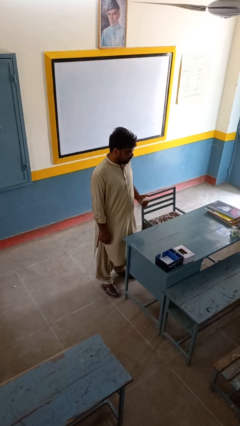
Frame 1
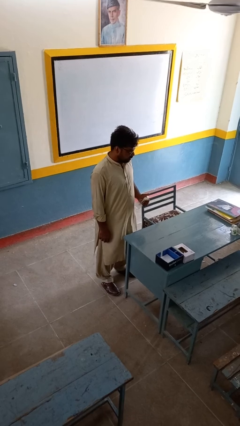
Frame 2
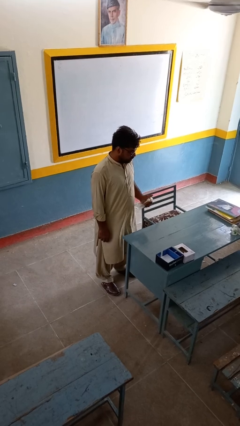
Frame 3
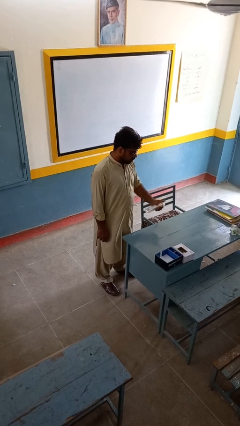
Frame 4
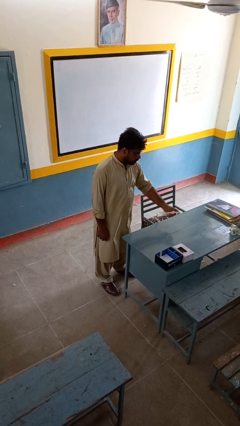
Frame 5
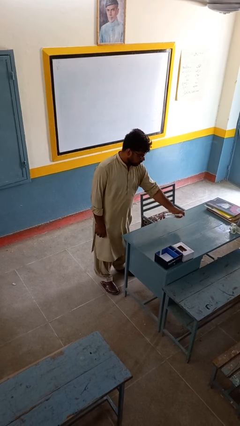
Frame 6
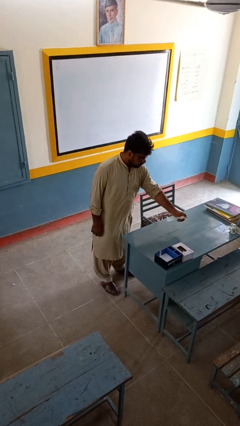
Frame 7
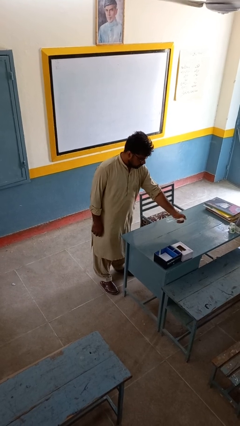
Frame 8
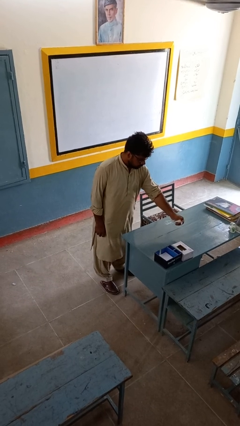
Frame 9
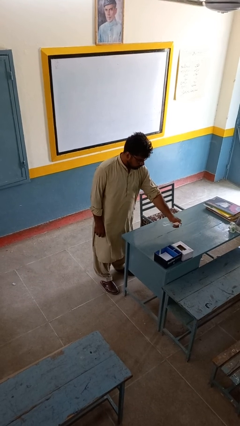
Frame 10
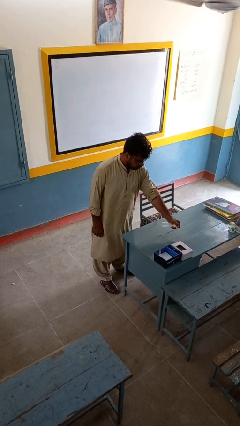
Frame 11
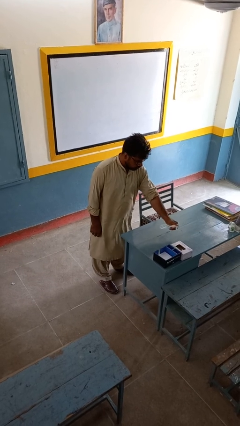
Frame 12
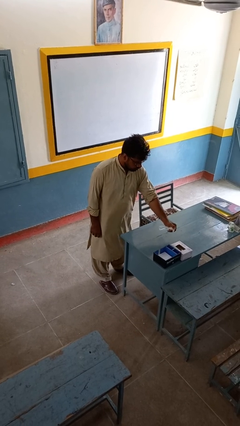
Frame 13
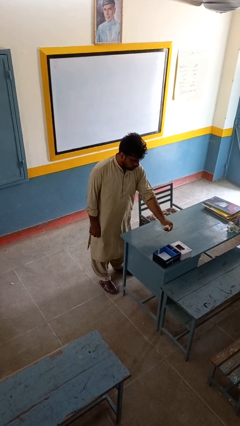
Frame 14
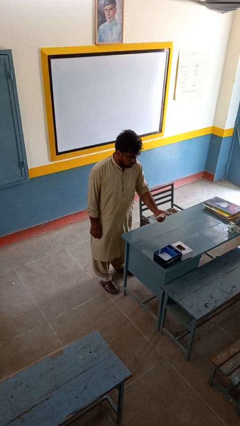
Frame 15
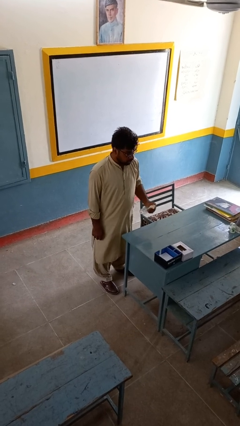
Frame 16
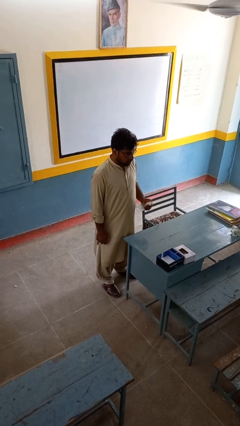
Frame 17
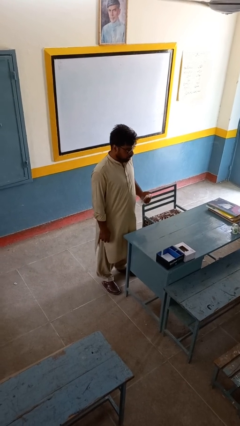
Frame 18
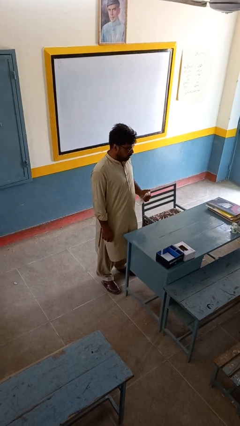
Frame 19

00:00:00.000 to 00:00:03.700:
person sprays from bottle

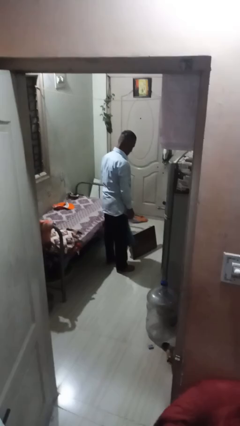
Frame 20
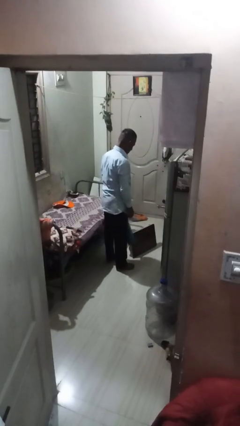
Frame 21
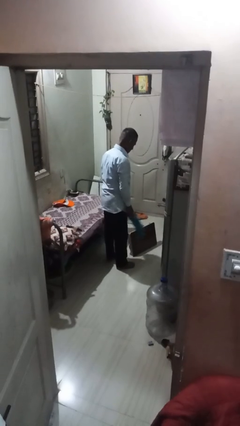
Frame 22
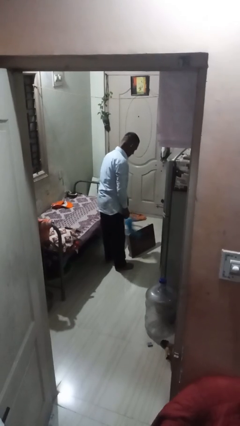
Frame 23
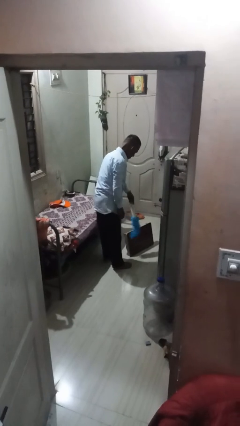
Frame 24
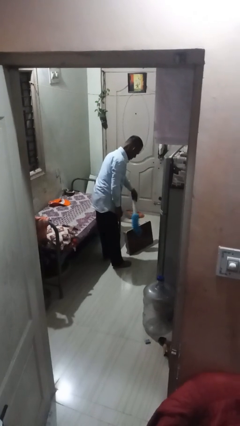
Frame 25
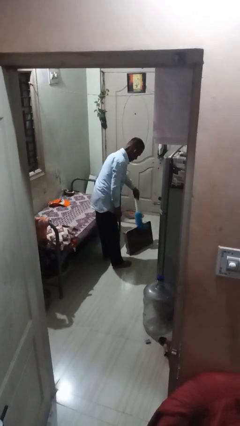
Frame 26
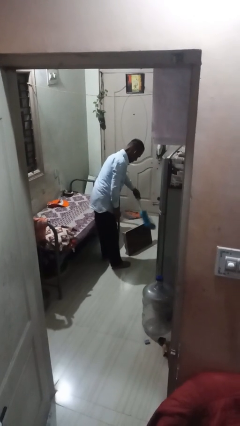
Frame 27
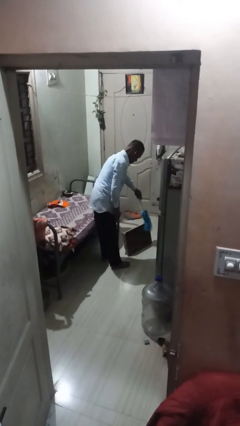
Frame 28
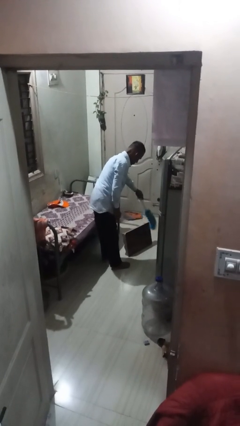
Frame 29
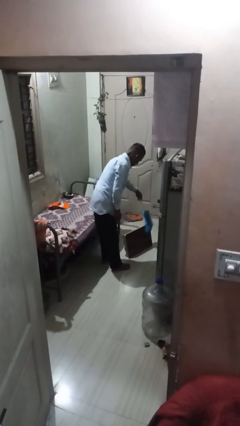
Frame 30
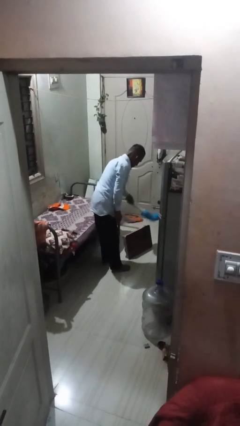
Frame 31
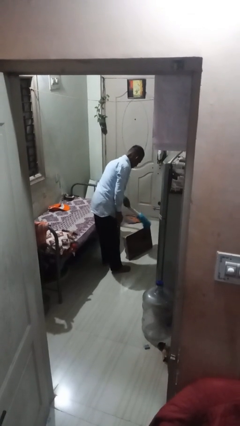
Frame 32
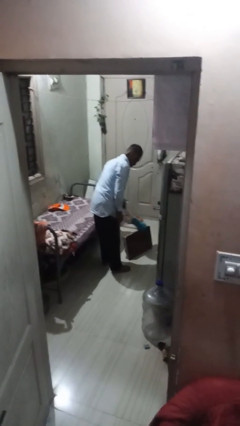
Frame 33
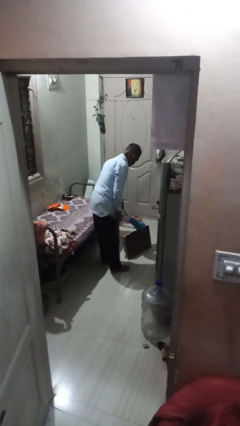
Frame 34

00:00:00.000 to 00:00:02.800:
person dusts furniture

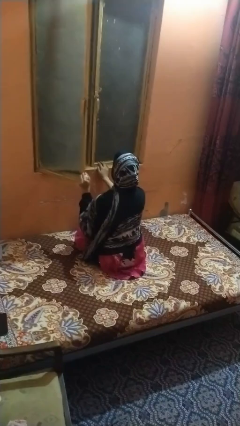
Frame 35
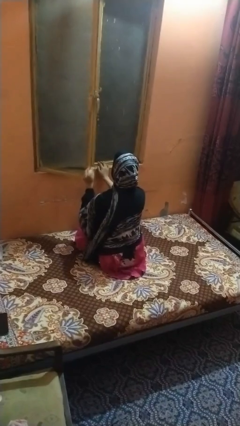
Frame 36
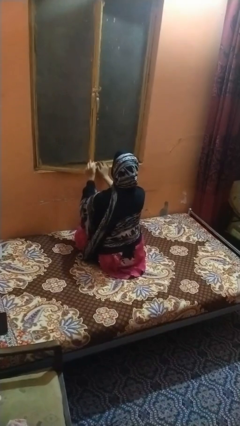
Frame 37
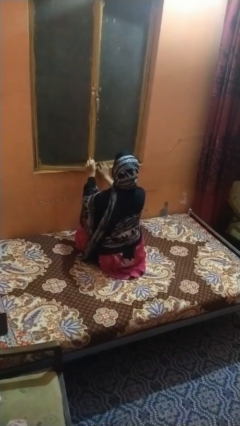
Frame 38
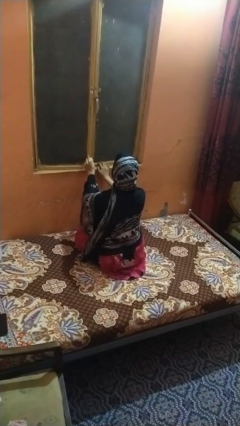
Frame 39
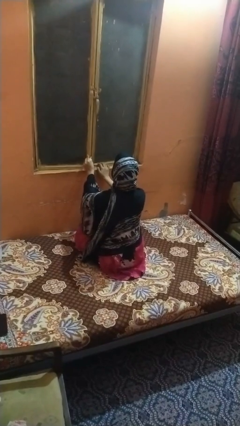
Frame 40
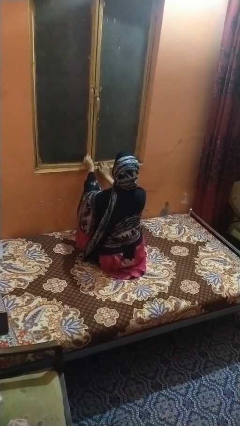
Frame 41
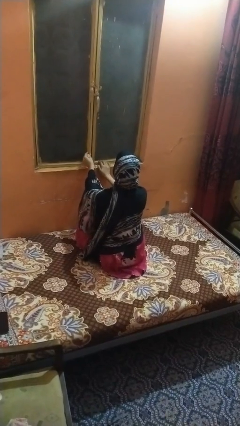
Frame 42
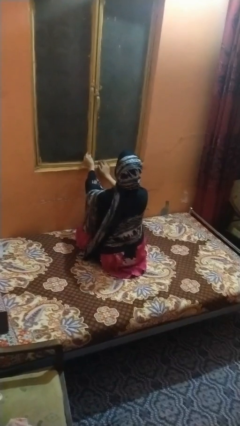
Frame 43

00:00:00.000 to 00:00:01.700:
person closes home window

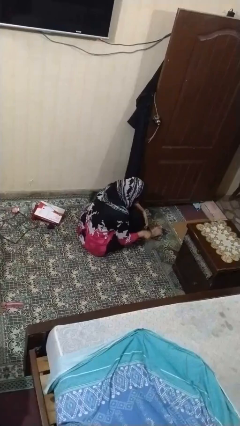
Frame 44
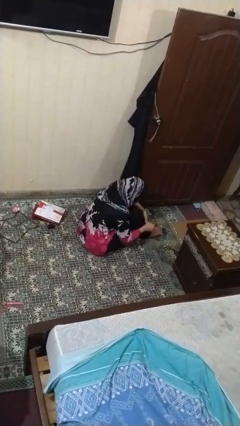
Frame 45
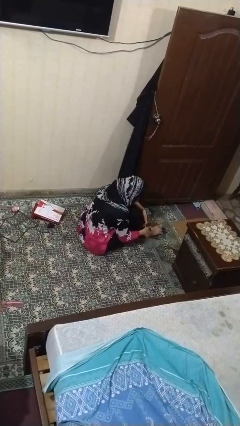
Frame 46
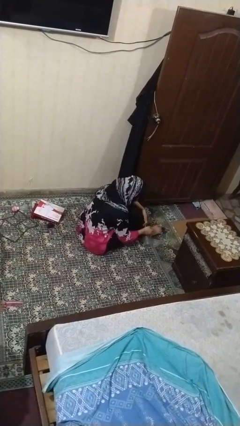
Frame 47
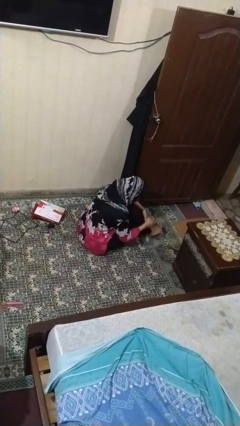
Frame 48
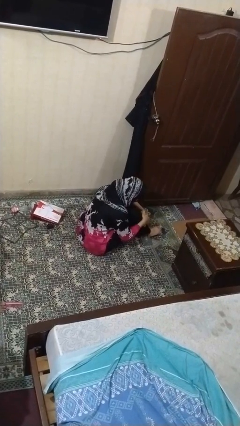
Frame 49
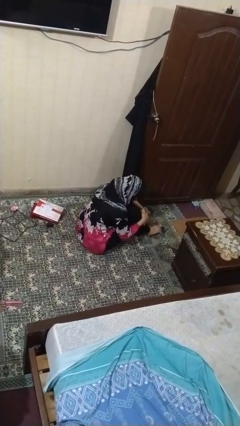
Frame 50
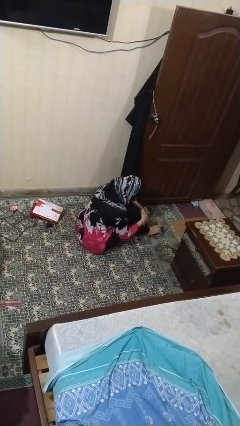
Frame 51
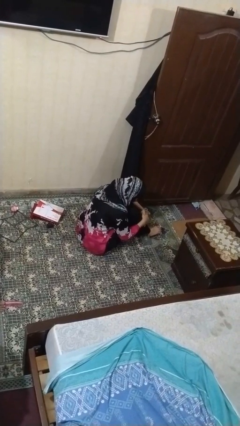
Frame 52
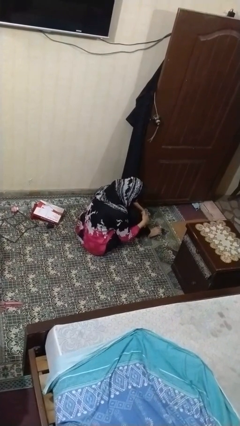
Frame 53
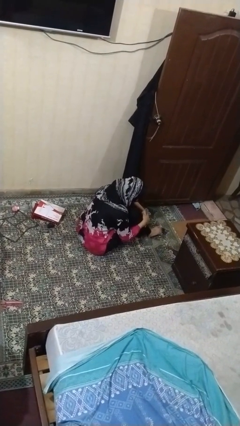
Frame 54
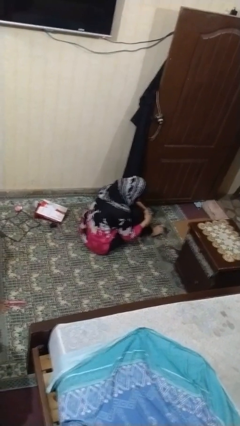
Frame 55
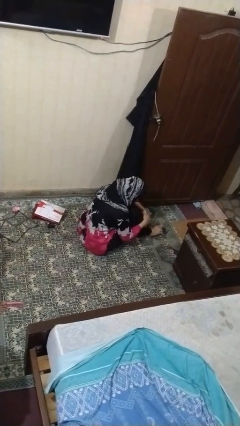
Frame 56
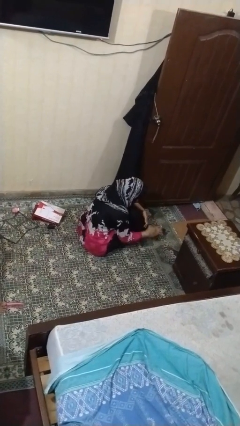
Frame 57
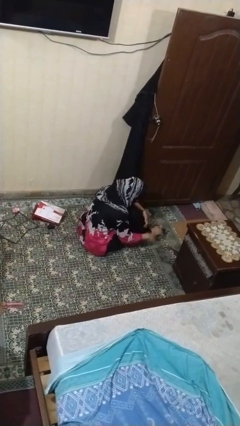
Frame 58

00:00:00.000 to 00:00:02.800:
person spills on floor

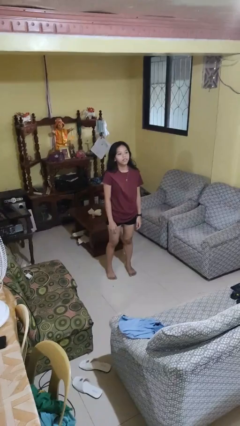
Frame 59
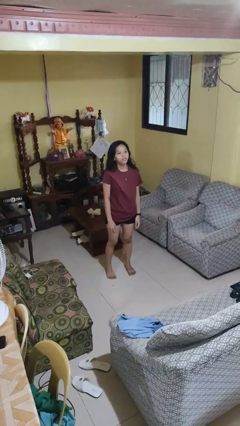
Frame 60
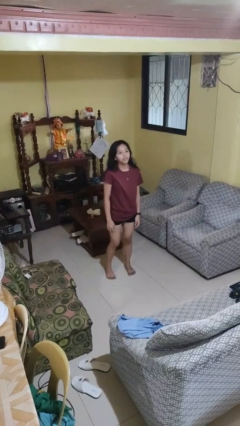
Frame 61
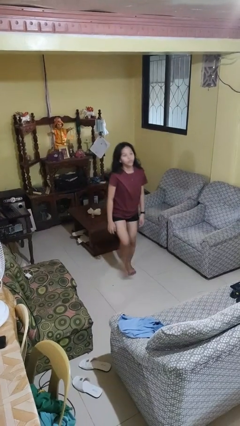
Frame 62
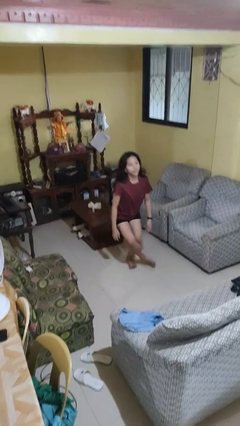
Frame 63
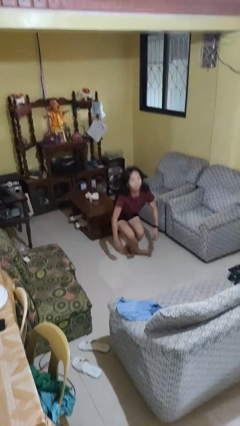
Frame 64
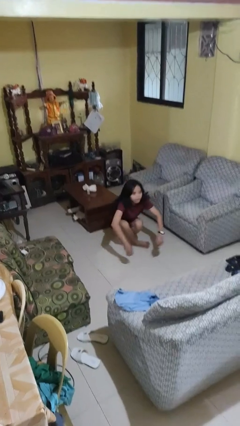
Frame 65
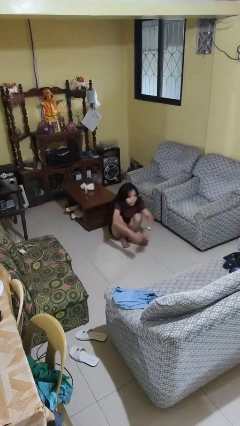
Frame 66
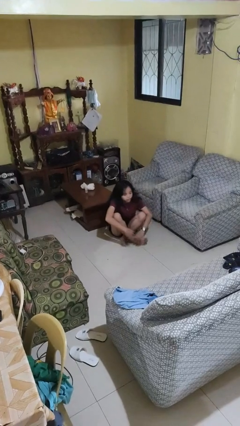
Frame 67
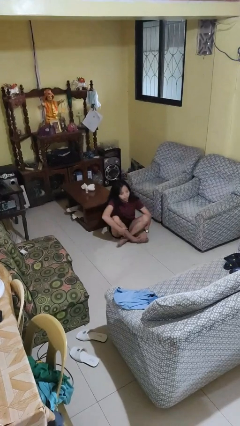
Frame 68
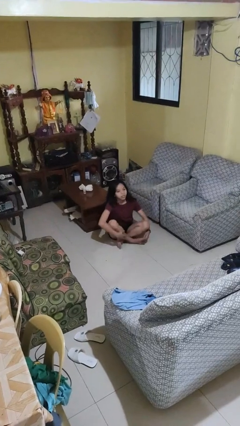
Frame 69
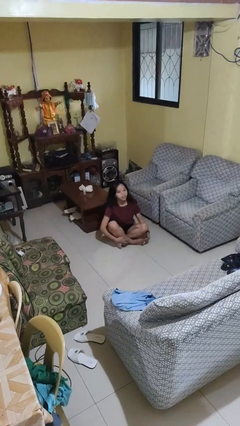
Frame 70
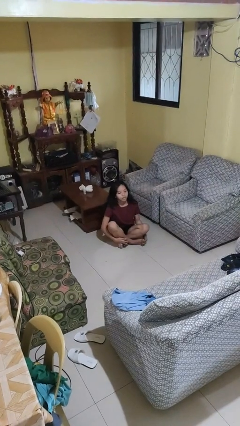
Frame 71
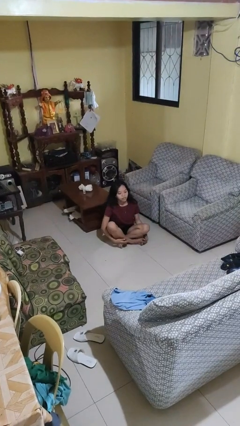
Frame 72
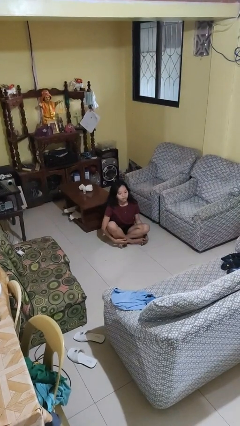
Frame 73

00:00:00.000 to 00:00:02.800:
person sits crisscross

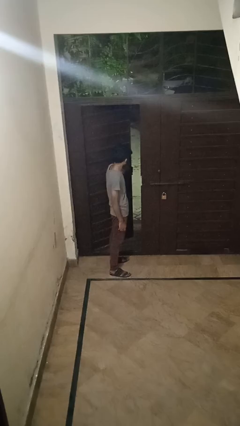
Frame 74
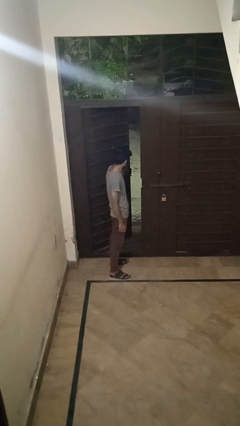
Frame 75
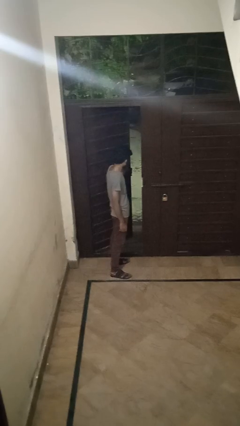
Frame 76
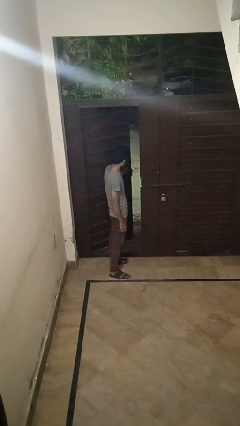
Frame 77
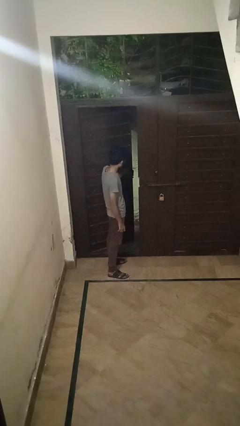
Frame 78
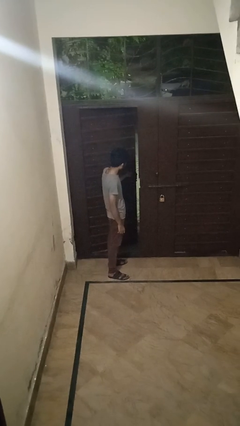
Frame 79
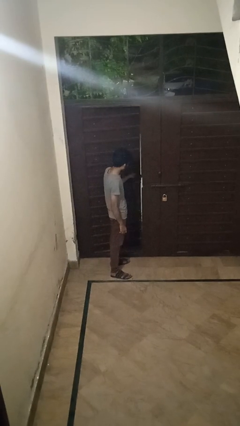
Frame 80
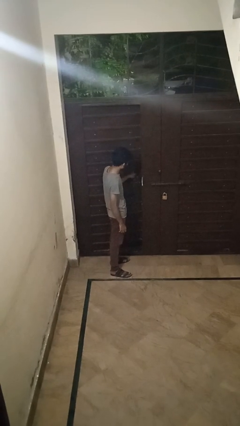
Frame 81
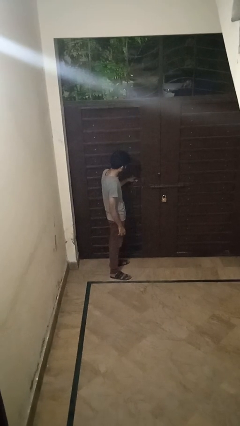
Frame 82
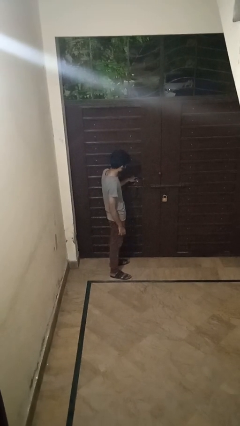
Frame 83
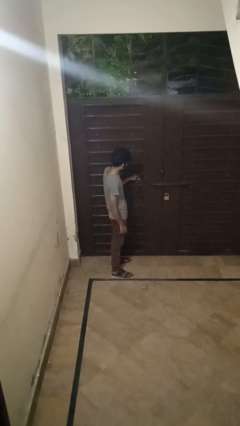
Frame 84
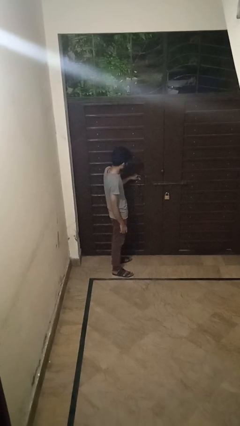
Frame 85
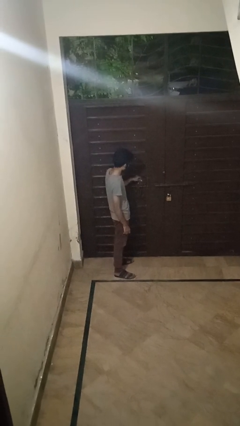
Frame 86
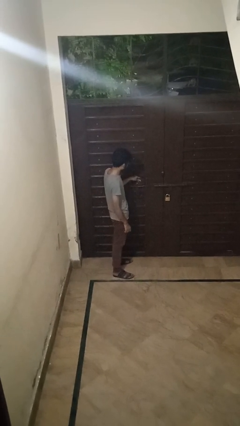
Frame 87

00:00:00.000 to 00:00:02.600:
person closes facility door

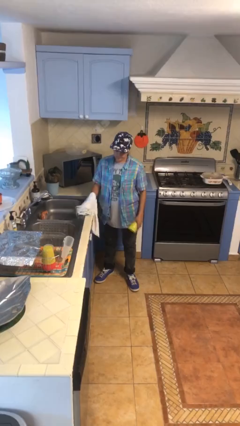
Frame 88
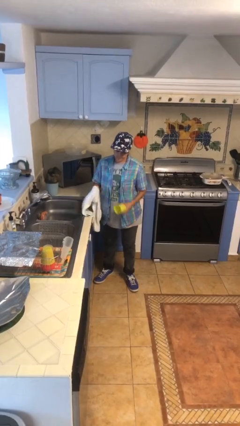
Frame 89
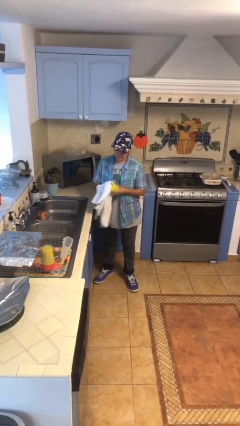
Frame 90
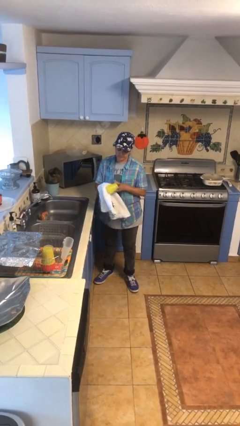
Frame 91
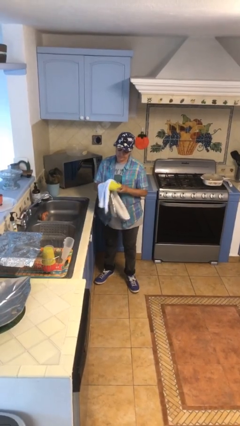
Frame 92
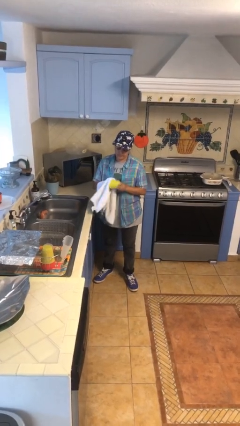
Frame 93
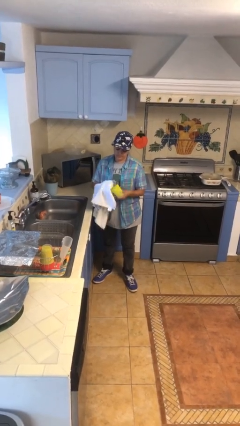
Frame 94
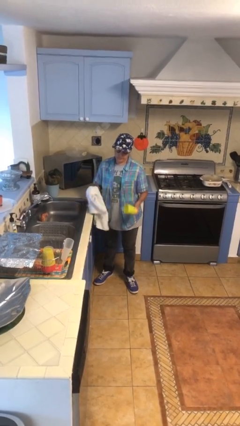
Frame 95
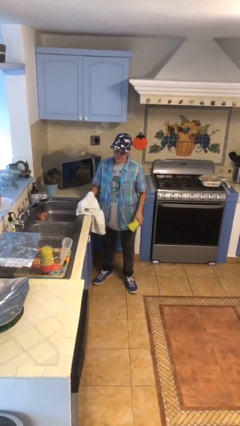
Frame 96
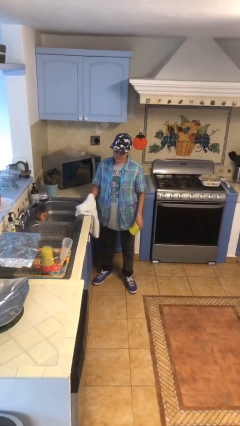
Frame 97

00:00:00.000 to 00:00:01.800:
person dries dish
